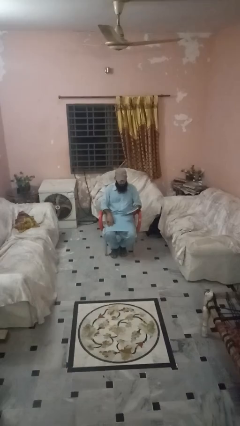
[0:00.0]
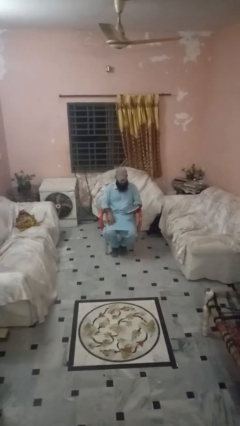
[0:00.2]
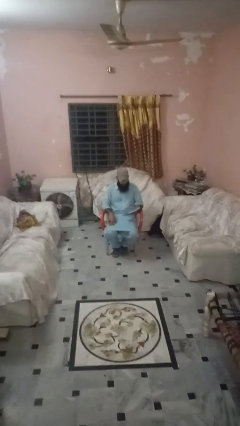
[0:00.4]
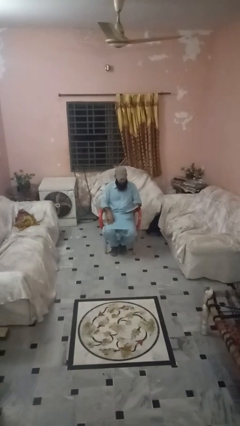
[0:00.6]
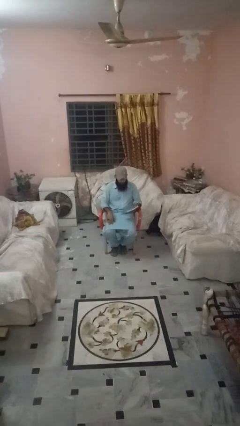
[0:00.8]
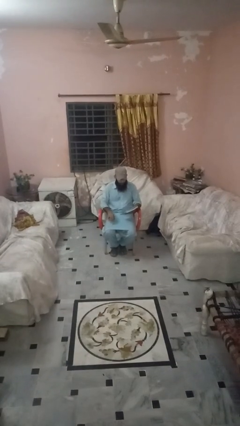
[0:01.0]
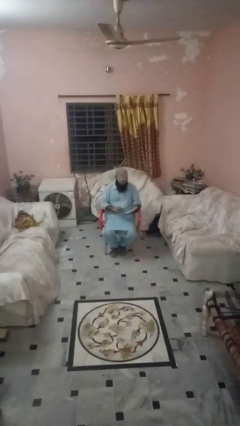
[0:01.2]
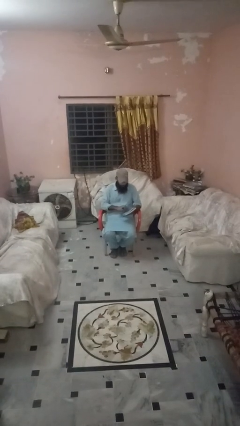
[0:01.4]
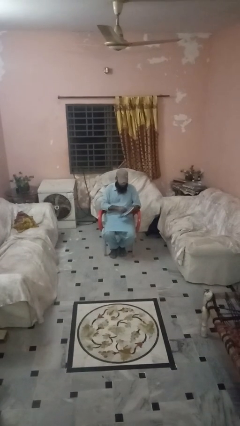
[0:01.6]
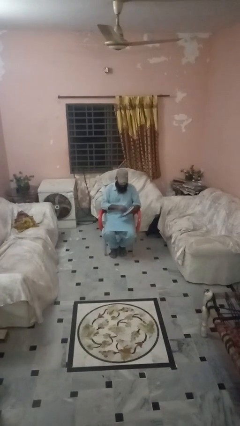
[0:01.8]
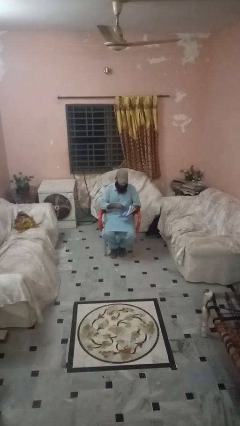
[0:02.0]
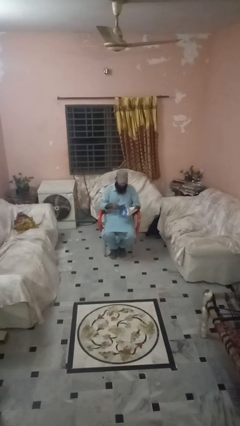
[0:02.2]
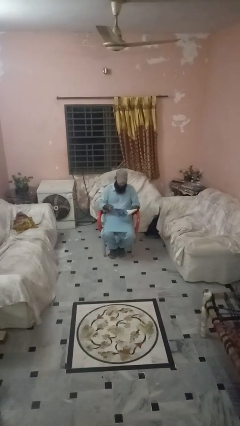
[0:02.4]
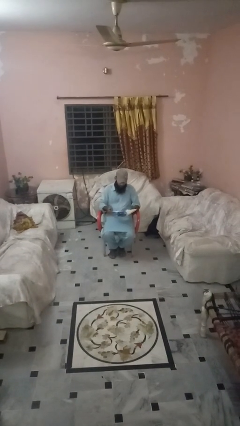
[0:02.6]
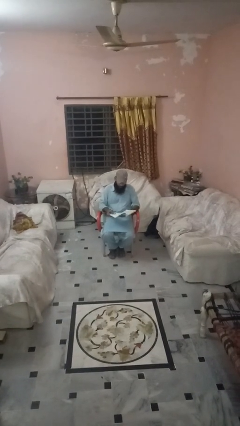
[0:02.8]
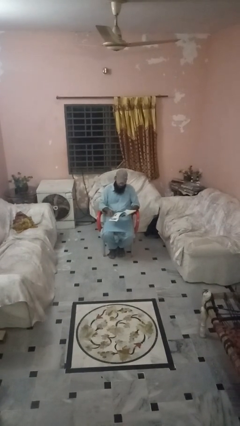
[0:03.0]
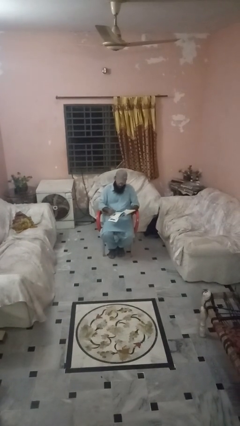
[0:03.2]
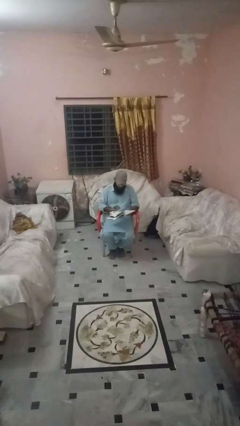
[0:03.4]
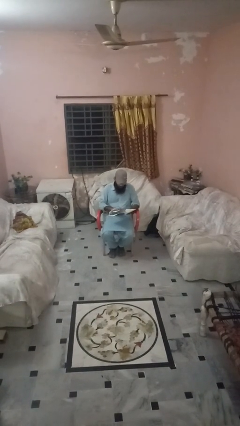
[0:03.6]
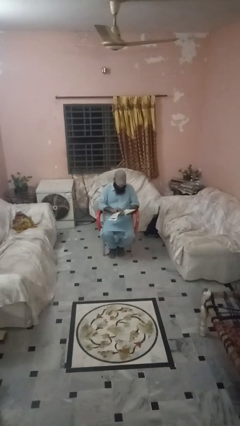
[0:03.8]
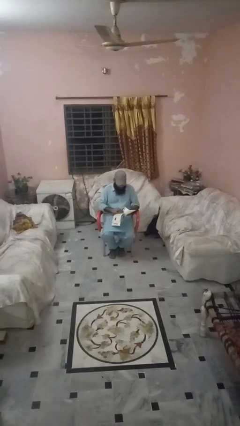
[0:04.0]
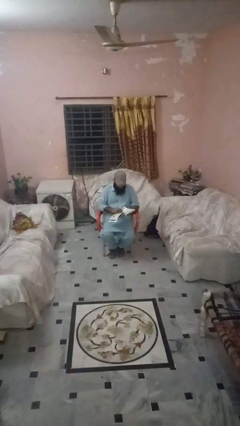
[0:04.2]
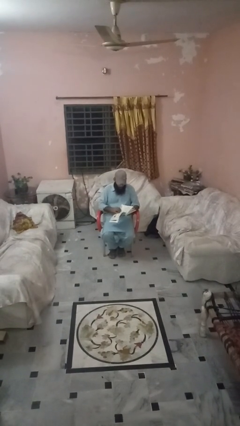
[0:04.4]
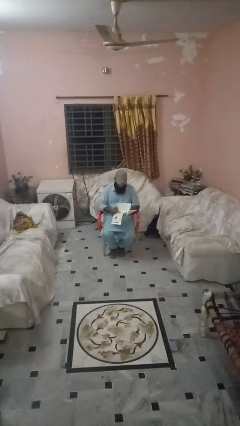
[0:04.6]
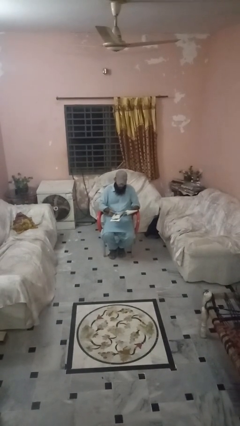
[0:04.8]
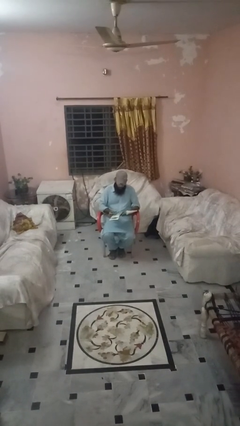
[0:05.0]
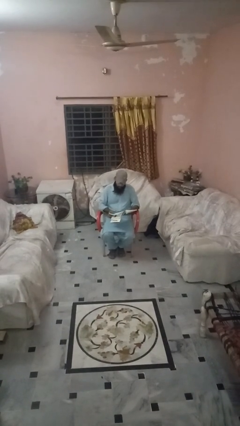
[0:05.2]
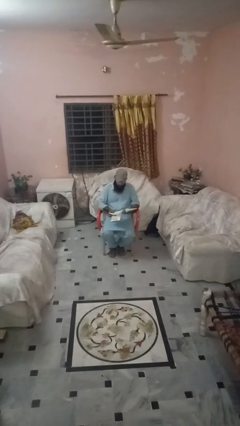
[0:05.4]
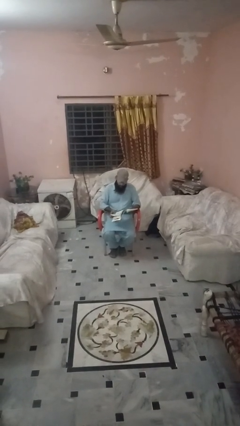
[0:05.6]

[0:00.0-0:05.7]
person reads book

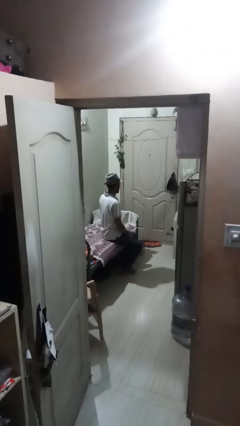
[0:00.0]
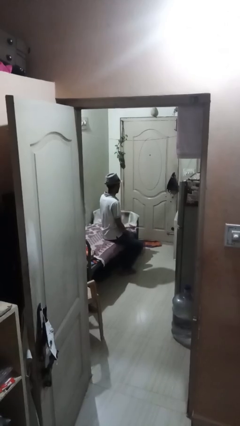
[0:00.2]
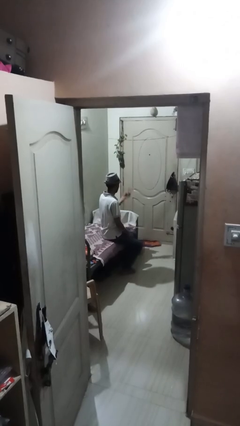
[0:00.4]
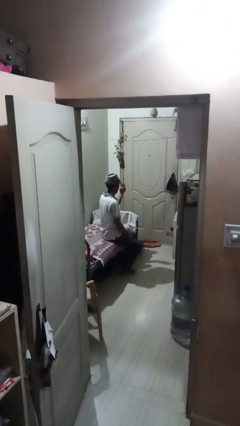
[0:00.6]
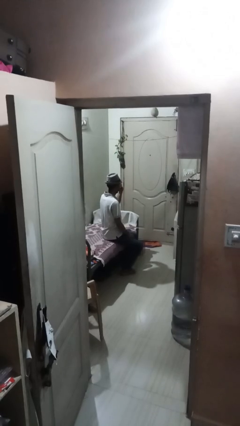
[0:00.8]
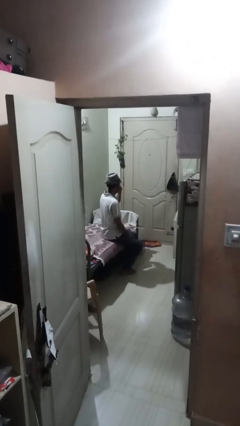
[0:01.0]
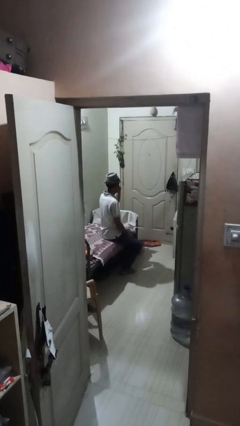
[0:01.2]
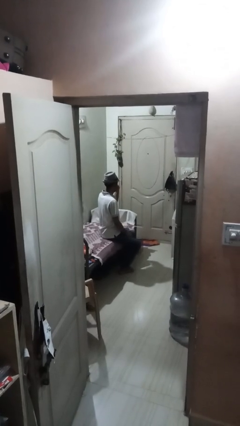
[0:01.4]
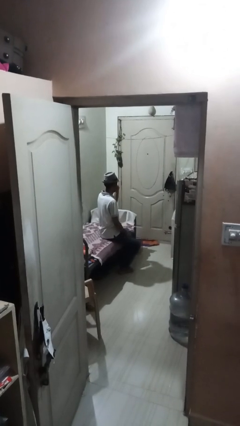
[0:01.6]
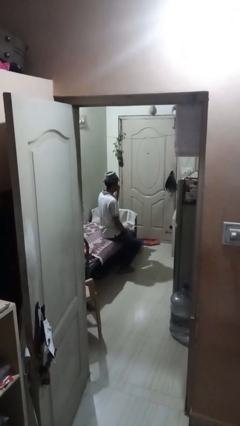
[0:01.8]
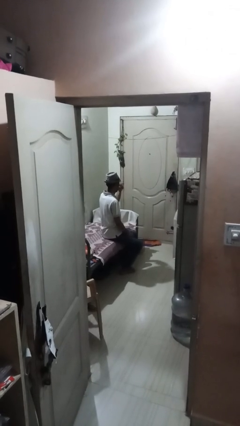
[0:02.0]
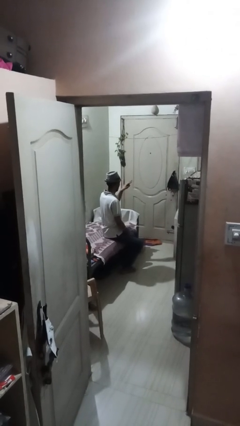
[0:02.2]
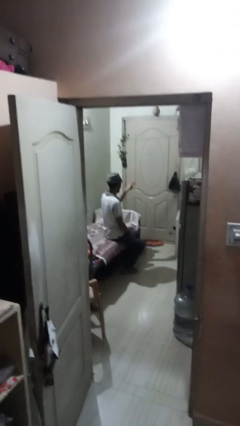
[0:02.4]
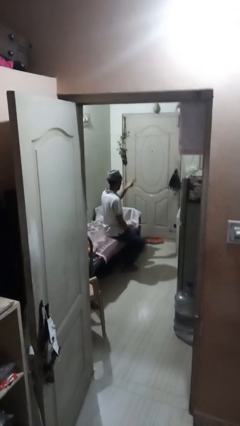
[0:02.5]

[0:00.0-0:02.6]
person gestures watch closely

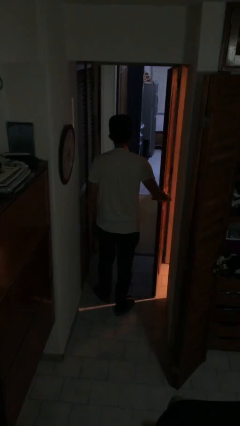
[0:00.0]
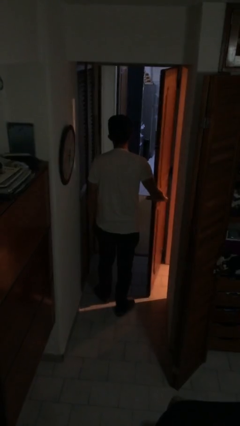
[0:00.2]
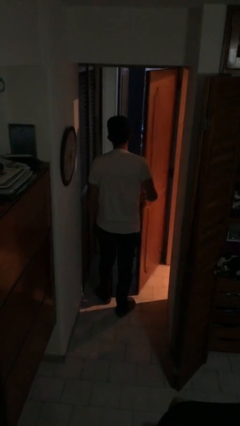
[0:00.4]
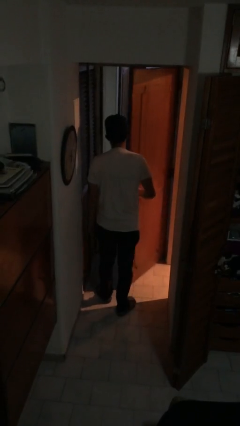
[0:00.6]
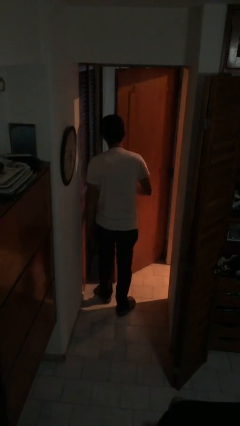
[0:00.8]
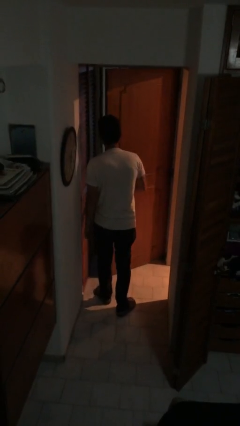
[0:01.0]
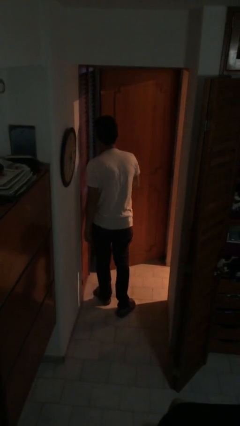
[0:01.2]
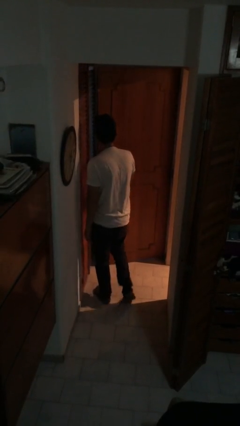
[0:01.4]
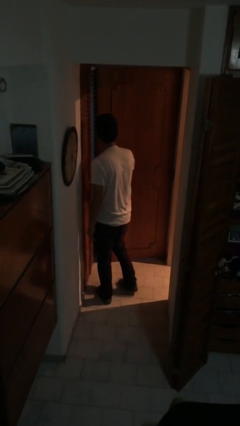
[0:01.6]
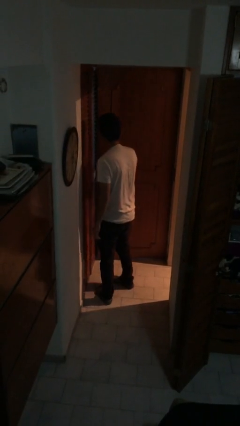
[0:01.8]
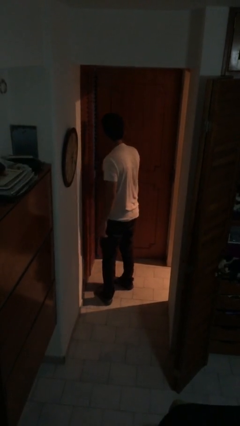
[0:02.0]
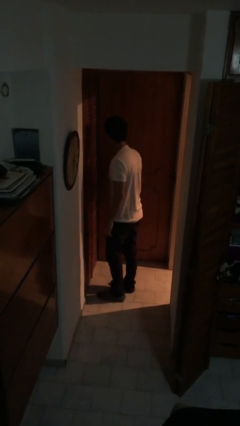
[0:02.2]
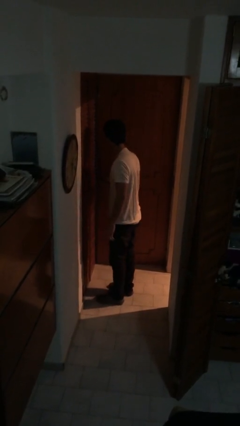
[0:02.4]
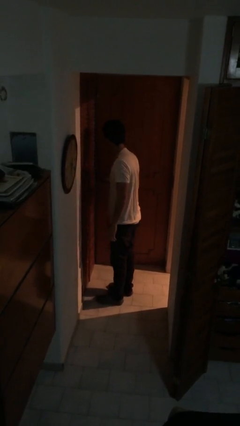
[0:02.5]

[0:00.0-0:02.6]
person closes facility door

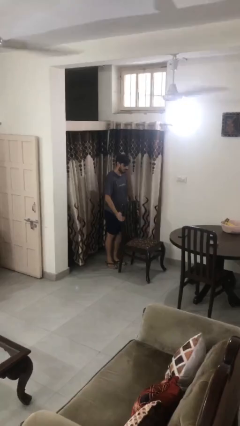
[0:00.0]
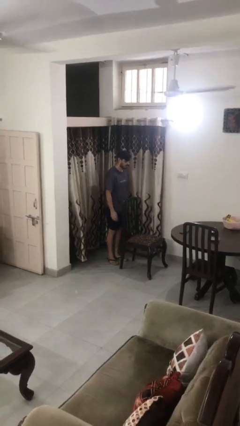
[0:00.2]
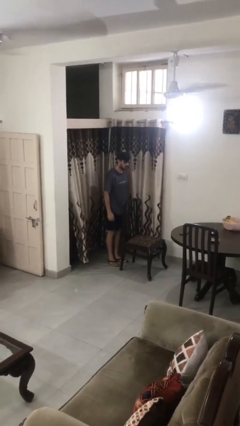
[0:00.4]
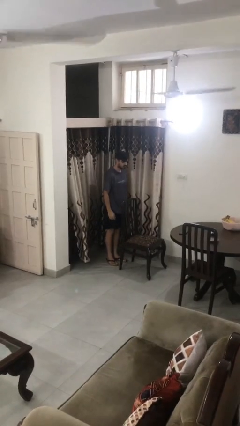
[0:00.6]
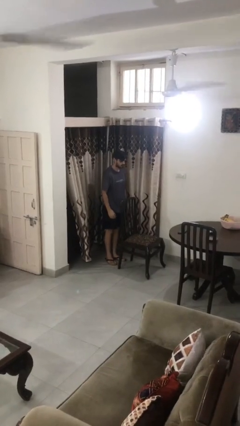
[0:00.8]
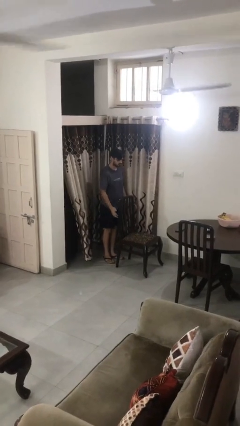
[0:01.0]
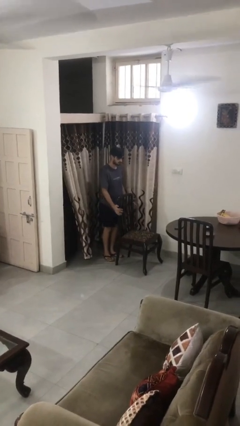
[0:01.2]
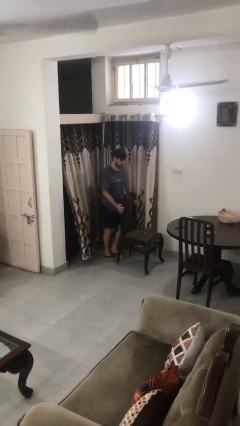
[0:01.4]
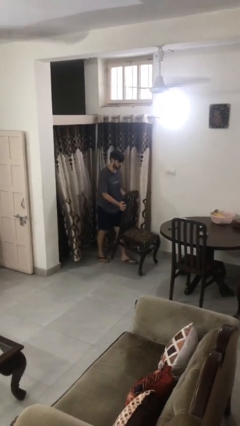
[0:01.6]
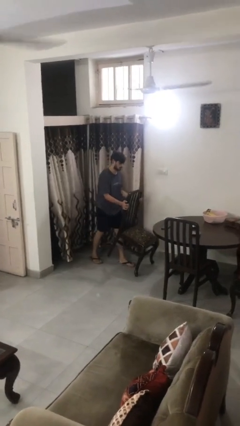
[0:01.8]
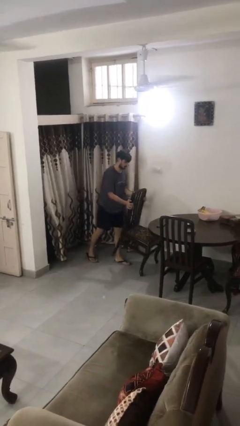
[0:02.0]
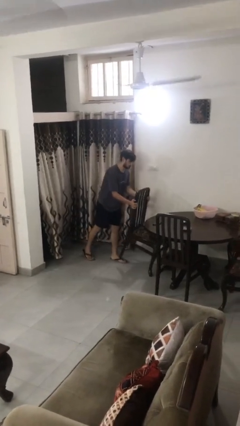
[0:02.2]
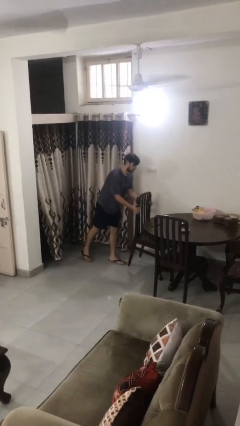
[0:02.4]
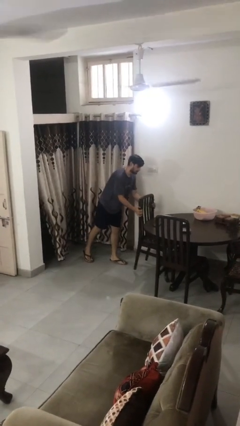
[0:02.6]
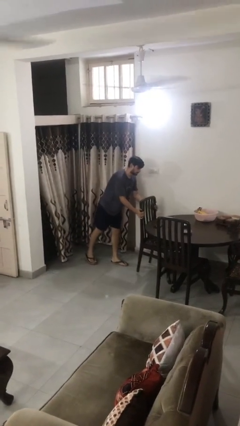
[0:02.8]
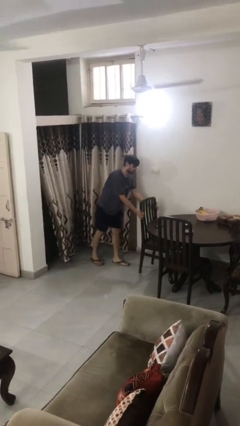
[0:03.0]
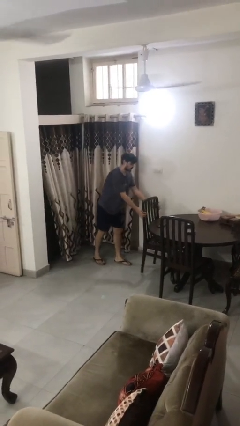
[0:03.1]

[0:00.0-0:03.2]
person pushes in chair

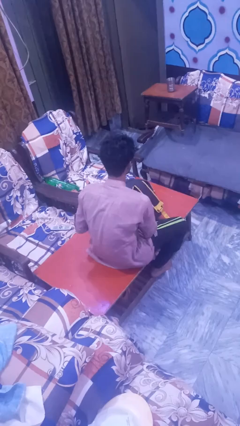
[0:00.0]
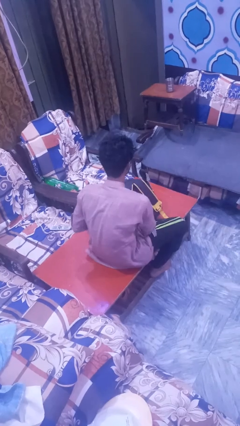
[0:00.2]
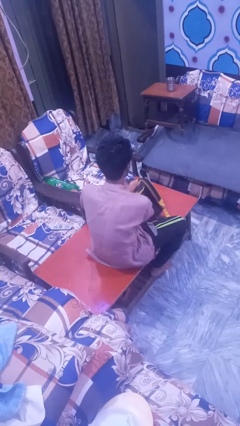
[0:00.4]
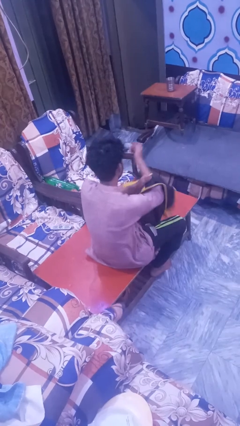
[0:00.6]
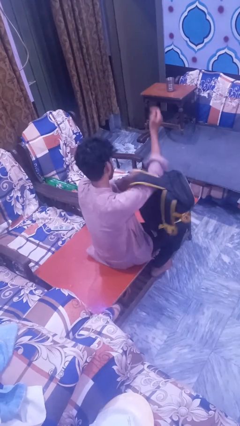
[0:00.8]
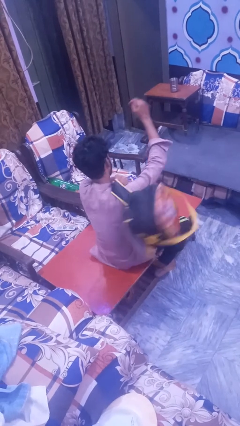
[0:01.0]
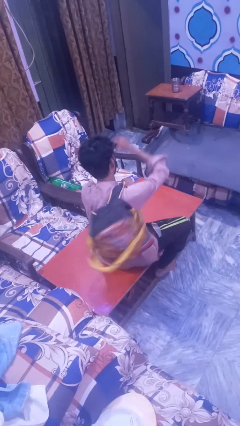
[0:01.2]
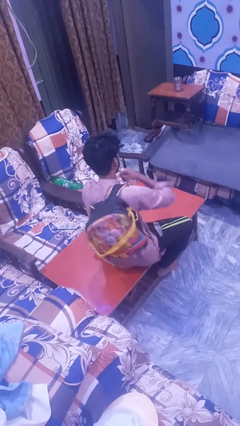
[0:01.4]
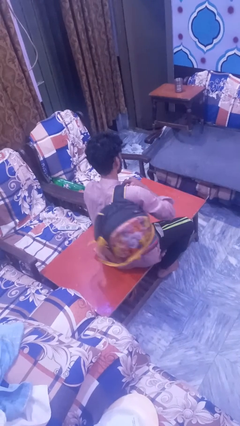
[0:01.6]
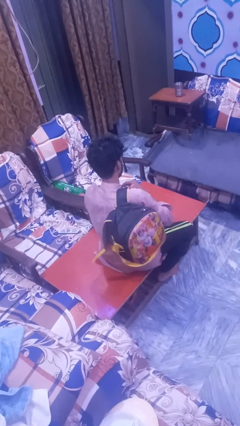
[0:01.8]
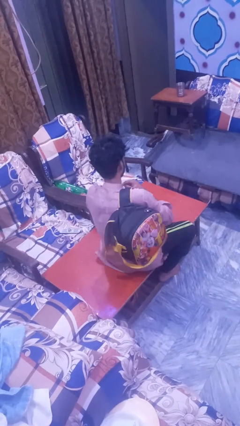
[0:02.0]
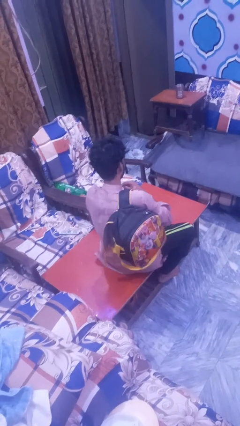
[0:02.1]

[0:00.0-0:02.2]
person puts on backpack

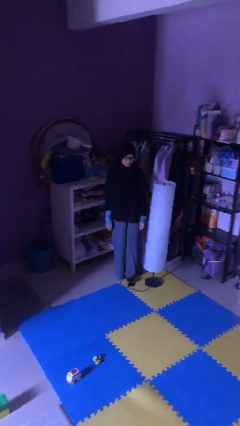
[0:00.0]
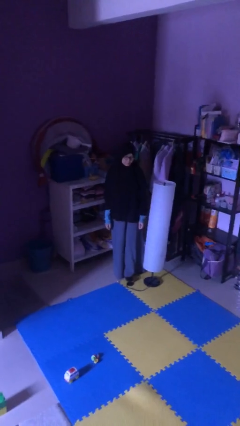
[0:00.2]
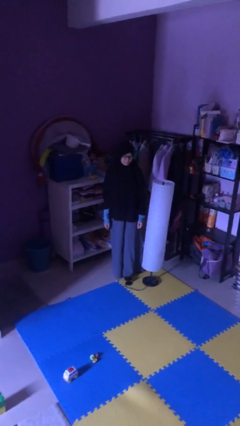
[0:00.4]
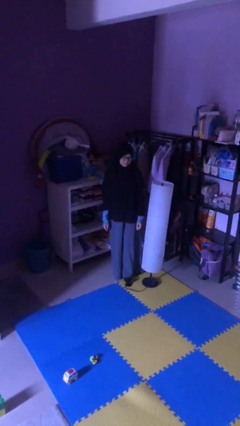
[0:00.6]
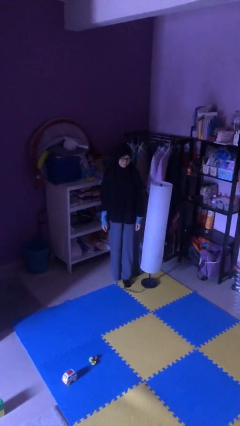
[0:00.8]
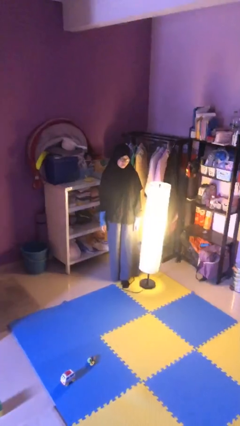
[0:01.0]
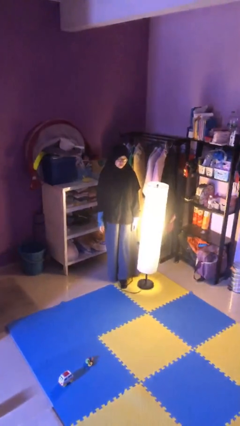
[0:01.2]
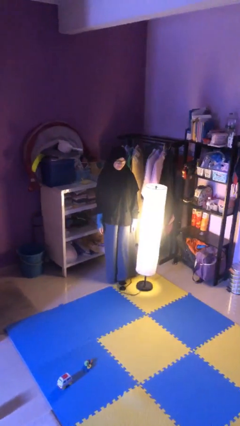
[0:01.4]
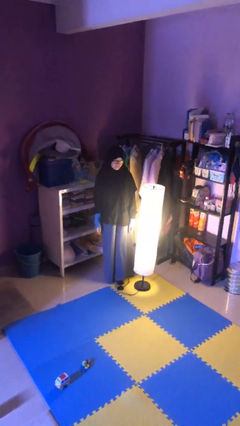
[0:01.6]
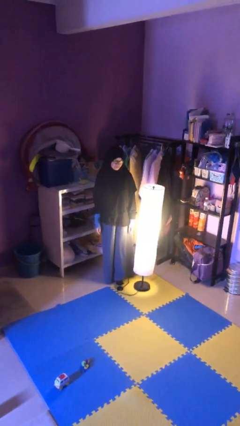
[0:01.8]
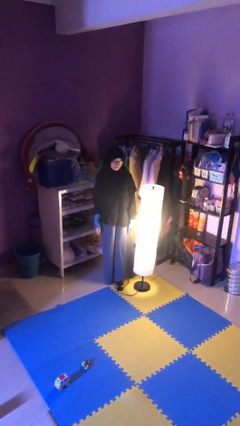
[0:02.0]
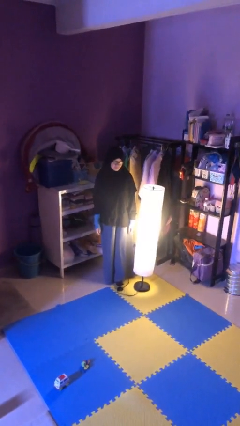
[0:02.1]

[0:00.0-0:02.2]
person turns on lamp
